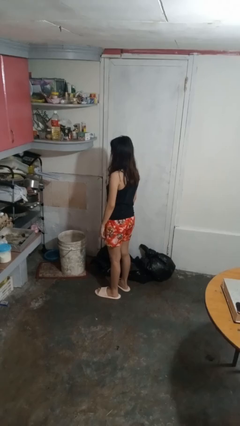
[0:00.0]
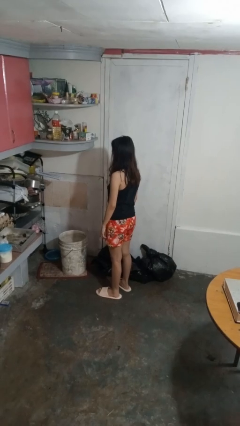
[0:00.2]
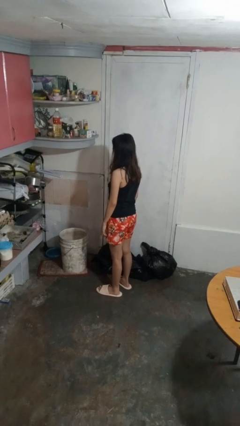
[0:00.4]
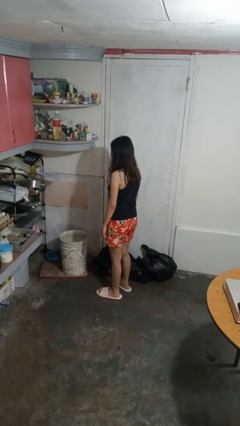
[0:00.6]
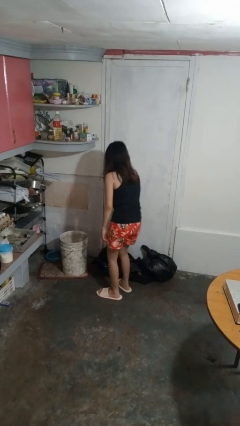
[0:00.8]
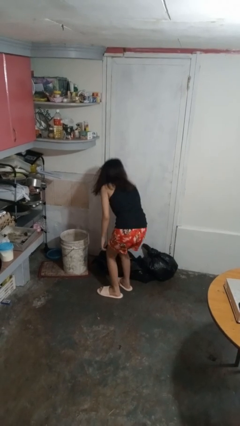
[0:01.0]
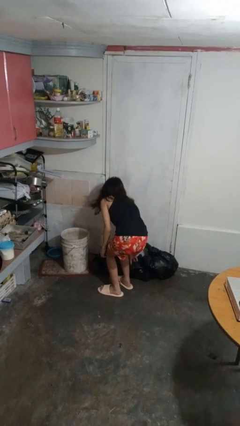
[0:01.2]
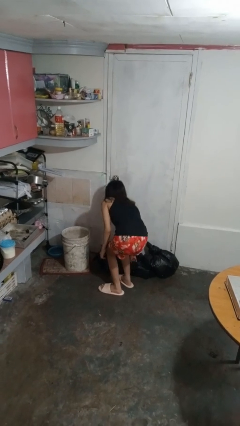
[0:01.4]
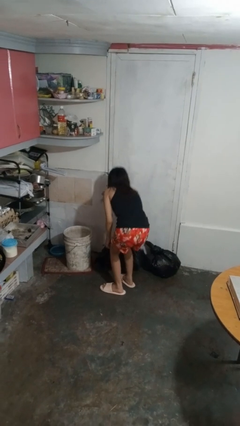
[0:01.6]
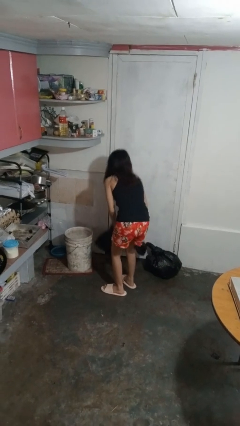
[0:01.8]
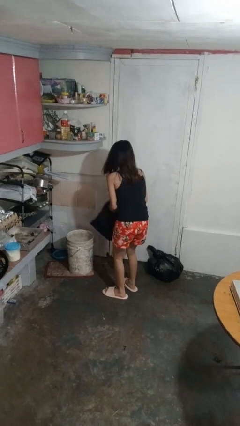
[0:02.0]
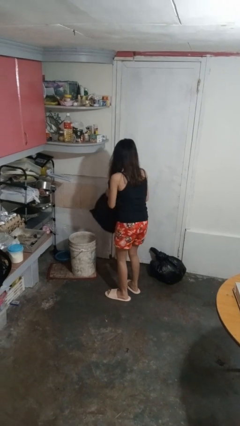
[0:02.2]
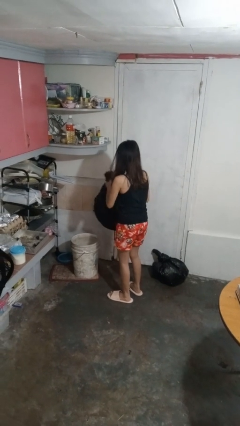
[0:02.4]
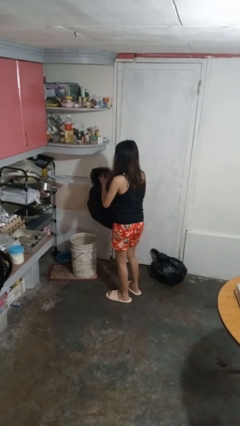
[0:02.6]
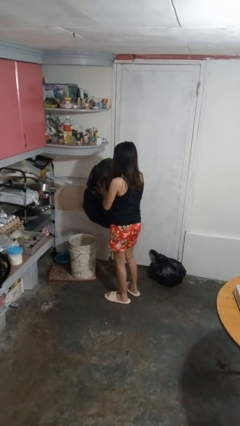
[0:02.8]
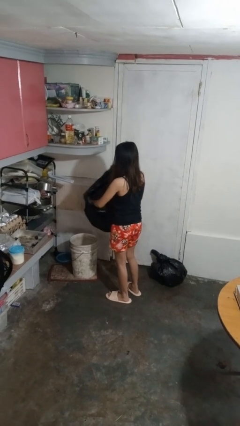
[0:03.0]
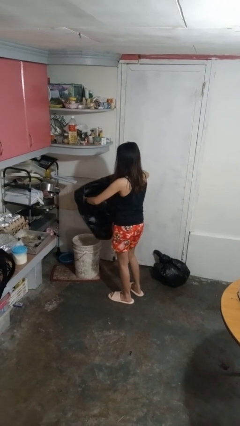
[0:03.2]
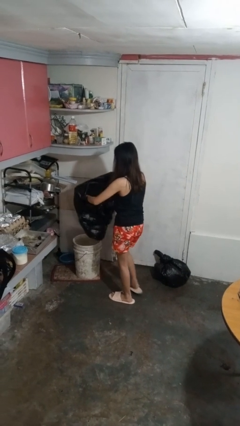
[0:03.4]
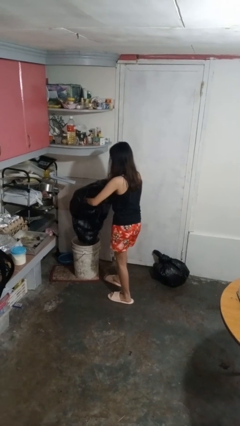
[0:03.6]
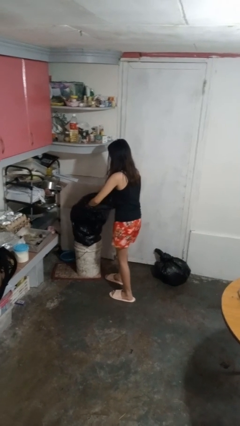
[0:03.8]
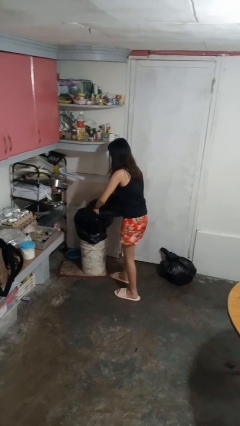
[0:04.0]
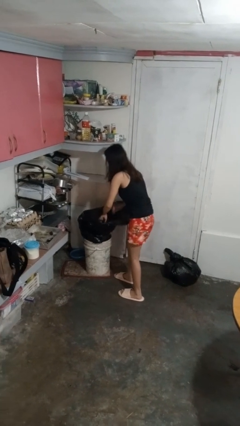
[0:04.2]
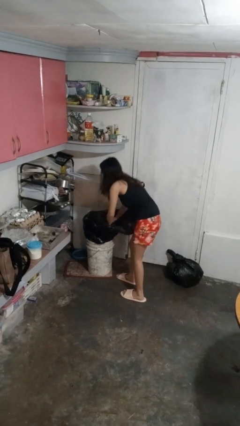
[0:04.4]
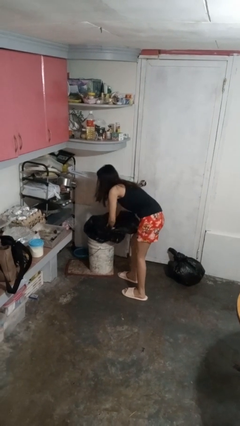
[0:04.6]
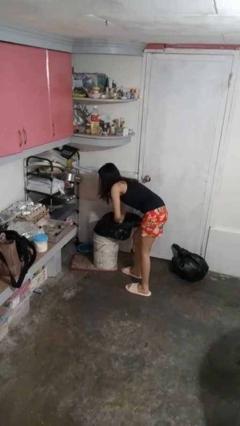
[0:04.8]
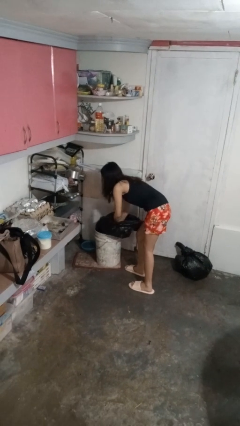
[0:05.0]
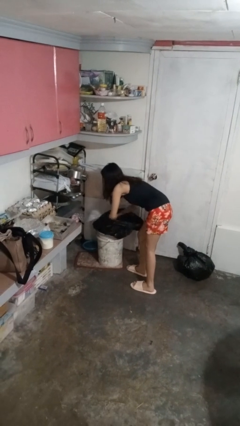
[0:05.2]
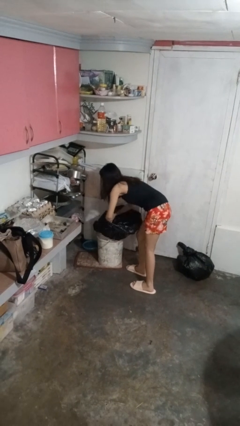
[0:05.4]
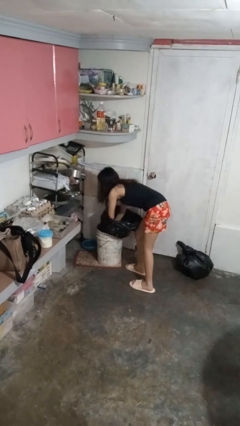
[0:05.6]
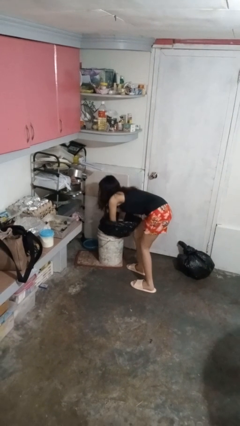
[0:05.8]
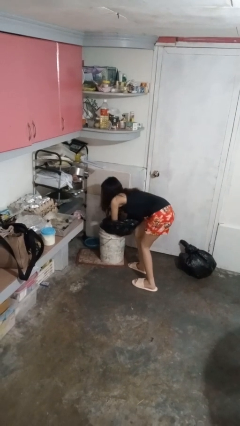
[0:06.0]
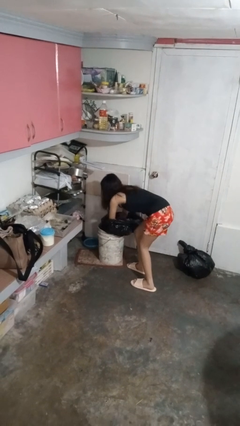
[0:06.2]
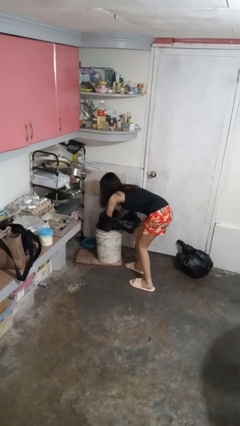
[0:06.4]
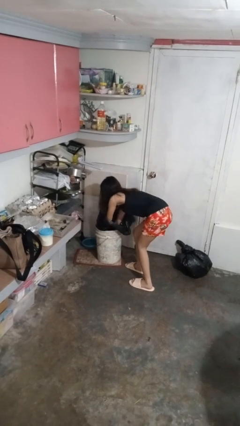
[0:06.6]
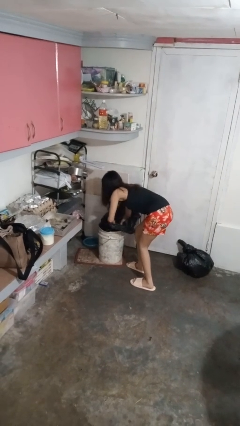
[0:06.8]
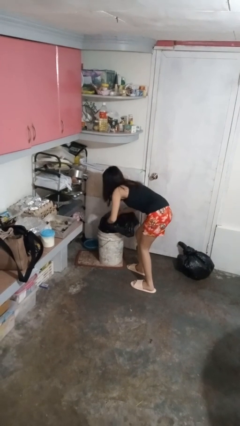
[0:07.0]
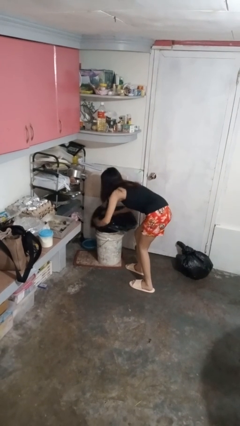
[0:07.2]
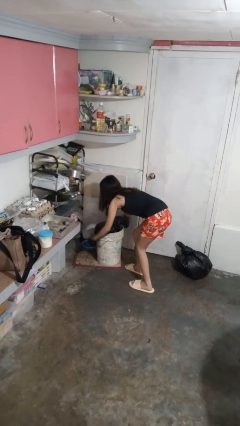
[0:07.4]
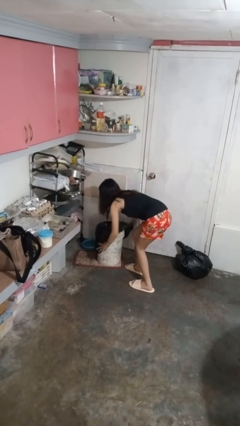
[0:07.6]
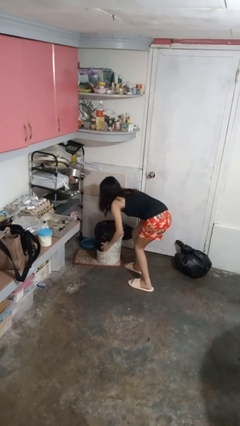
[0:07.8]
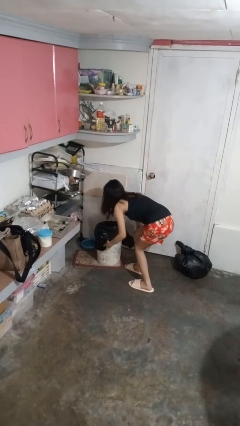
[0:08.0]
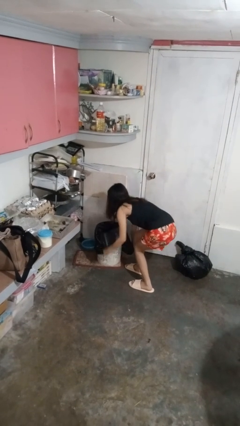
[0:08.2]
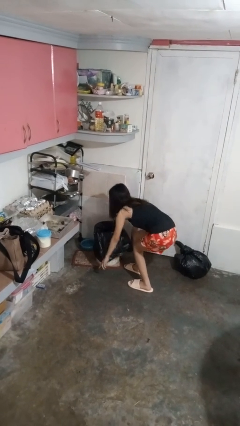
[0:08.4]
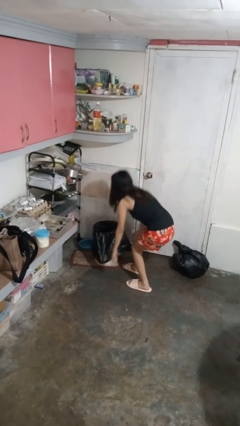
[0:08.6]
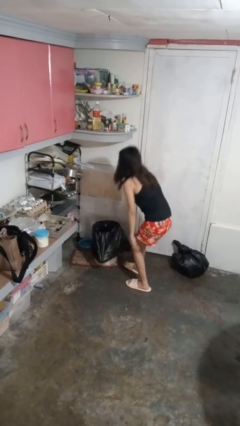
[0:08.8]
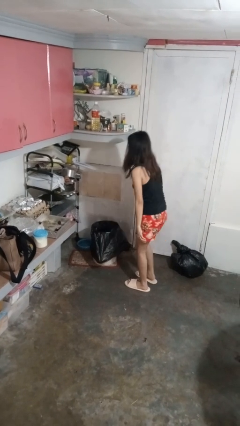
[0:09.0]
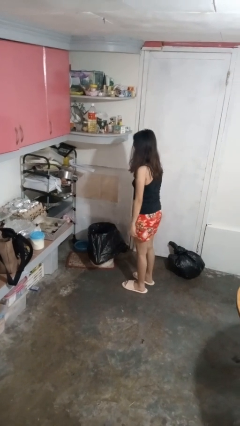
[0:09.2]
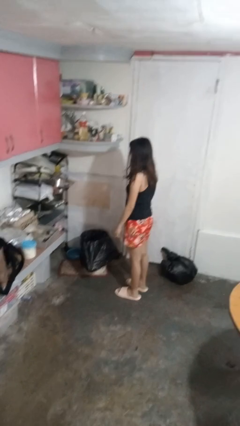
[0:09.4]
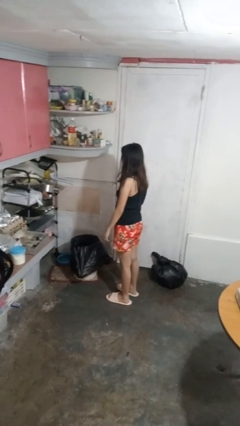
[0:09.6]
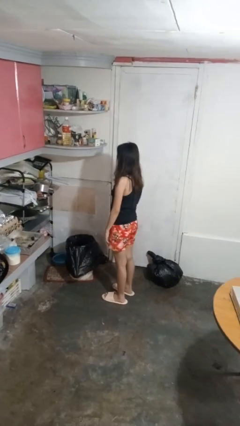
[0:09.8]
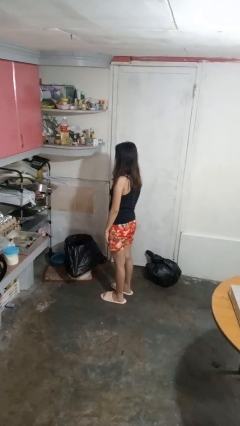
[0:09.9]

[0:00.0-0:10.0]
person inserts trashbag into trashcan

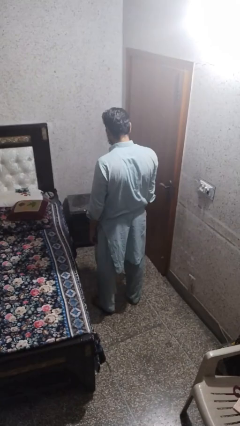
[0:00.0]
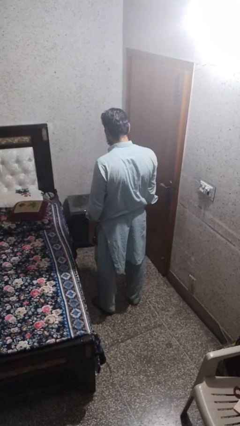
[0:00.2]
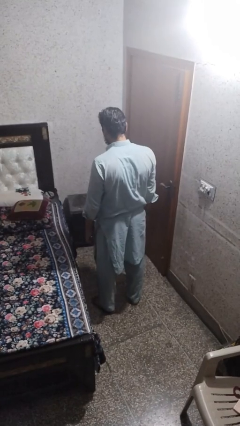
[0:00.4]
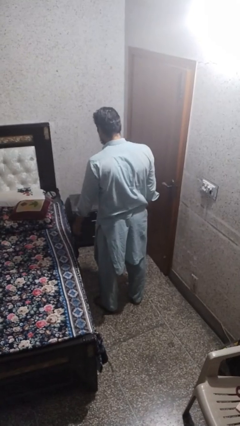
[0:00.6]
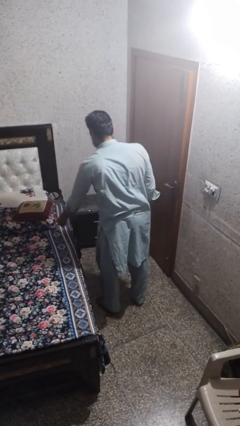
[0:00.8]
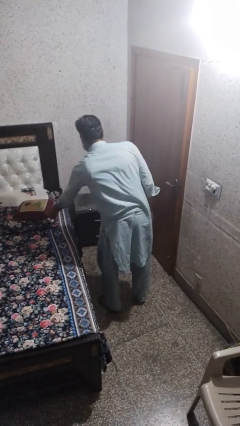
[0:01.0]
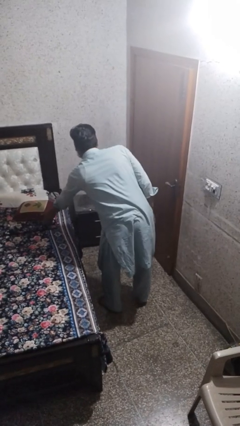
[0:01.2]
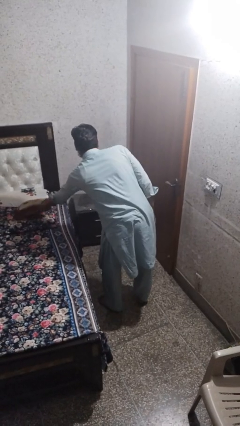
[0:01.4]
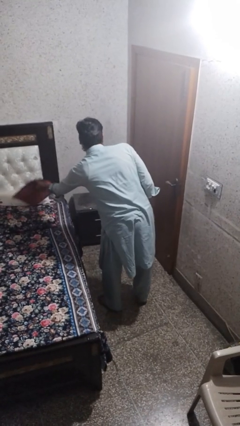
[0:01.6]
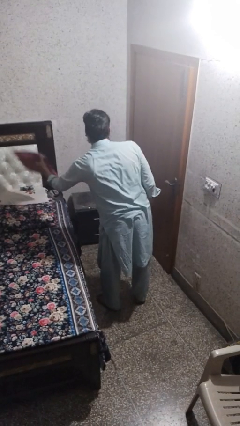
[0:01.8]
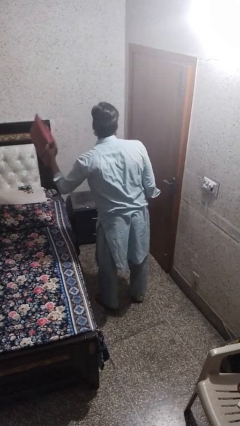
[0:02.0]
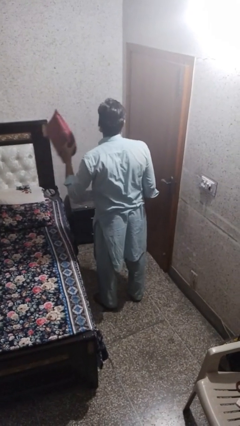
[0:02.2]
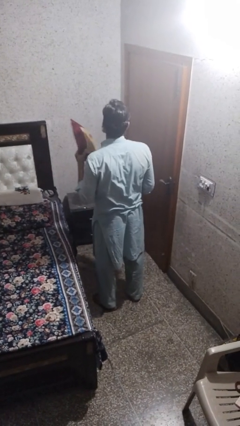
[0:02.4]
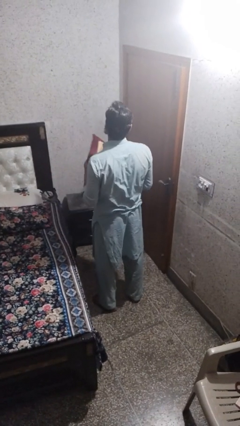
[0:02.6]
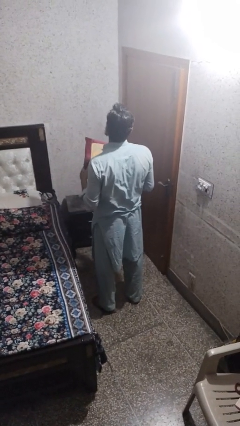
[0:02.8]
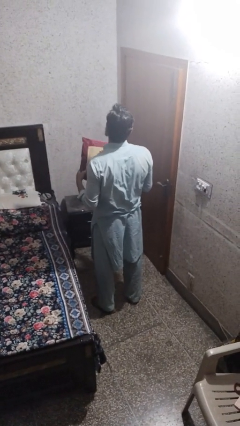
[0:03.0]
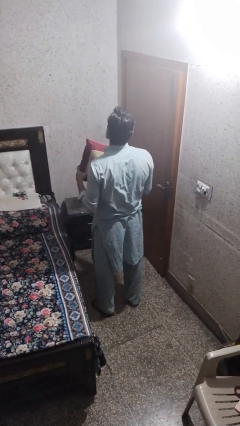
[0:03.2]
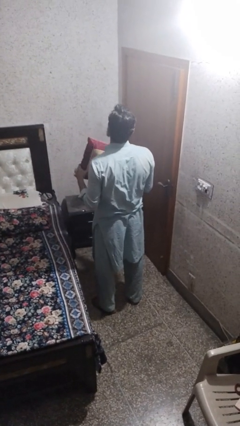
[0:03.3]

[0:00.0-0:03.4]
person picks up object from bed

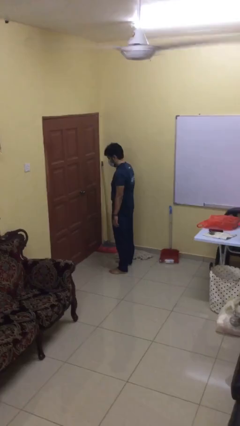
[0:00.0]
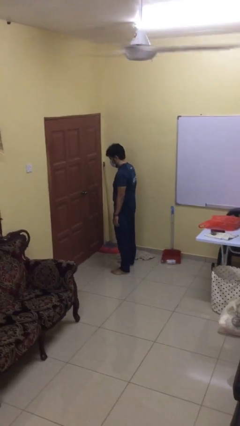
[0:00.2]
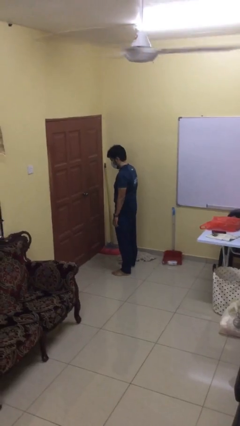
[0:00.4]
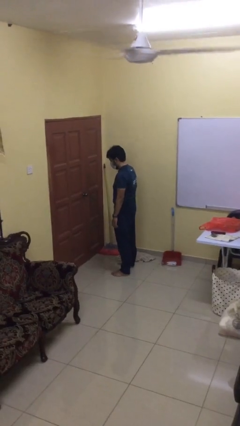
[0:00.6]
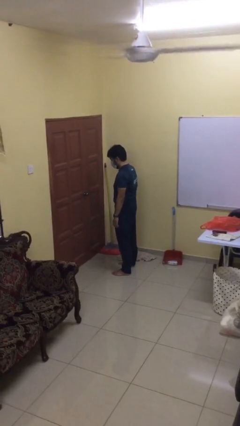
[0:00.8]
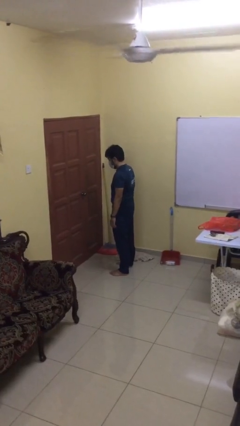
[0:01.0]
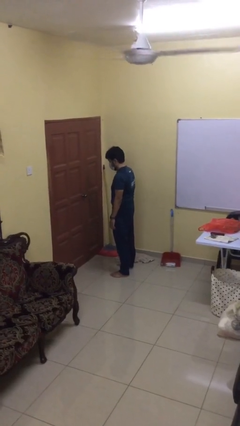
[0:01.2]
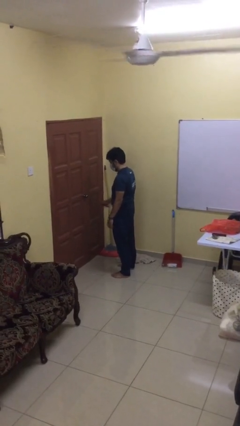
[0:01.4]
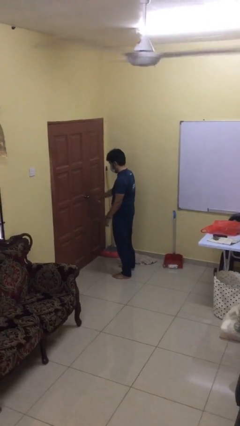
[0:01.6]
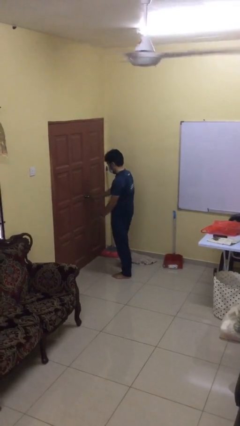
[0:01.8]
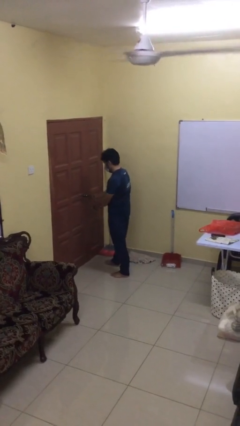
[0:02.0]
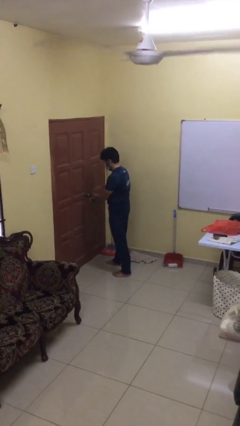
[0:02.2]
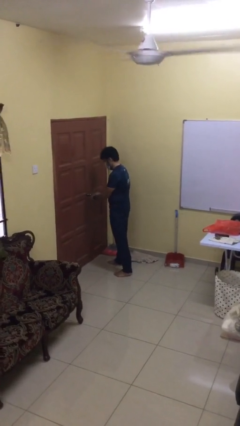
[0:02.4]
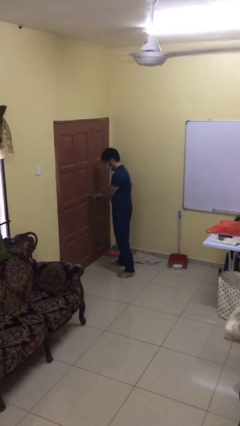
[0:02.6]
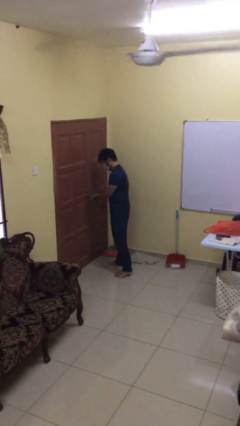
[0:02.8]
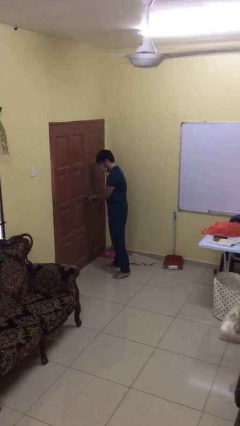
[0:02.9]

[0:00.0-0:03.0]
person unlocks door with keys

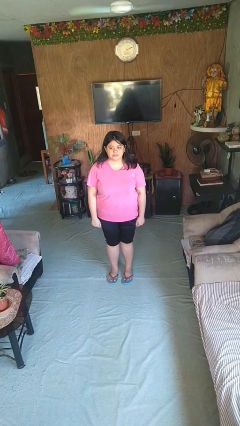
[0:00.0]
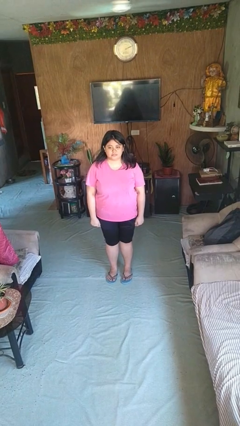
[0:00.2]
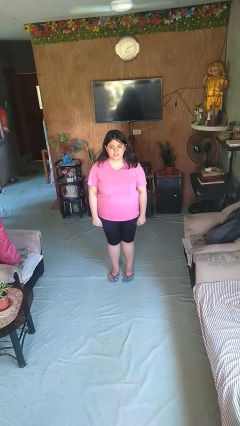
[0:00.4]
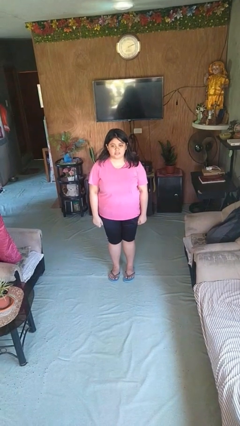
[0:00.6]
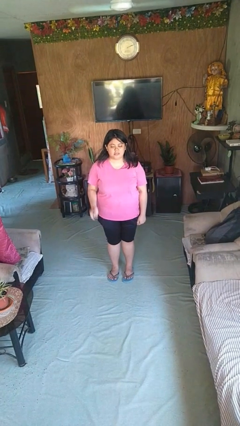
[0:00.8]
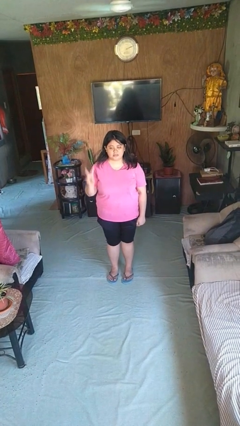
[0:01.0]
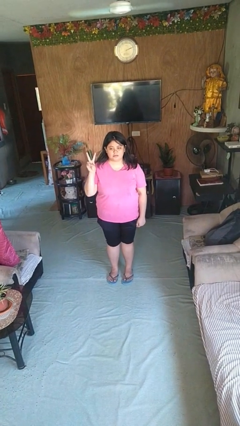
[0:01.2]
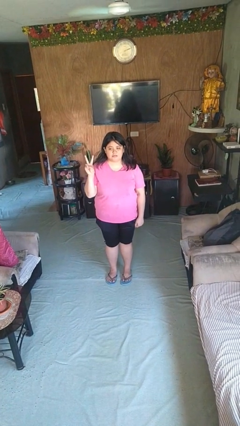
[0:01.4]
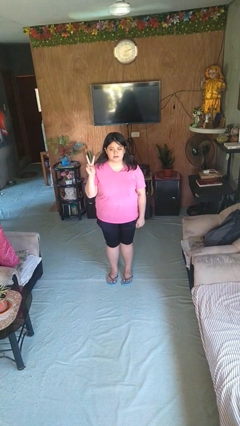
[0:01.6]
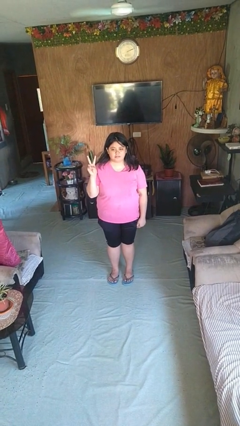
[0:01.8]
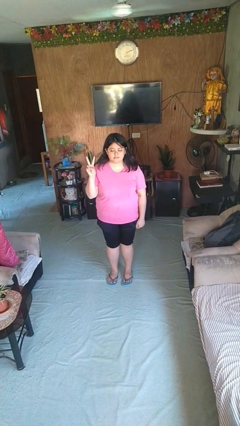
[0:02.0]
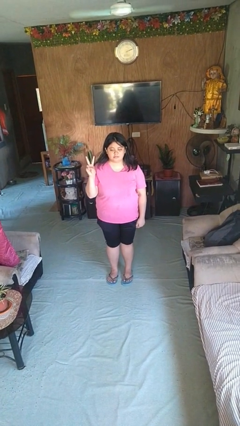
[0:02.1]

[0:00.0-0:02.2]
person gestures peace
